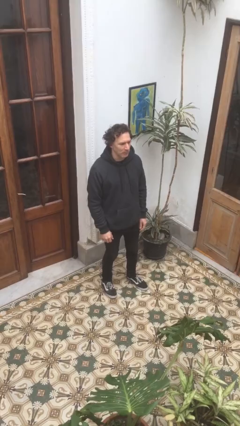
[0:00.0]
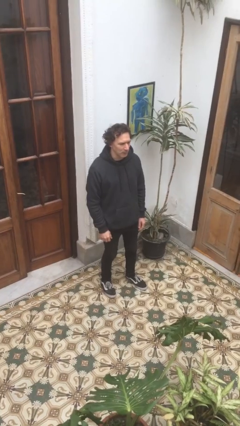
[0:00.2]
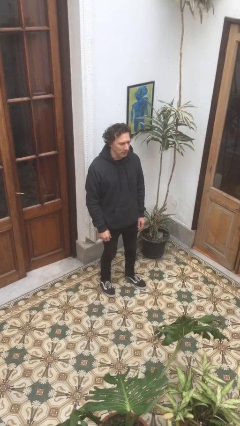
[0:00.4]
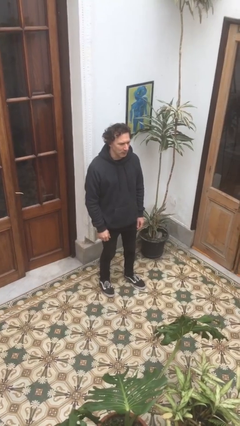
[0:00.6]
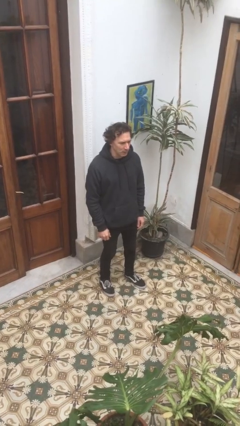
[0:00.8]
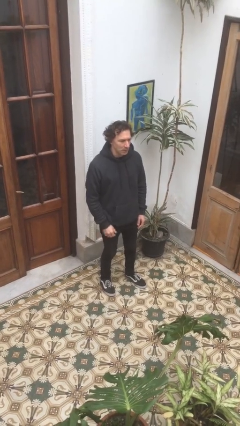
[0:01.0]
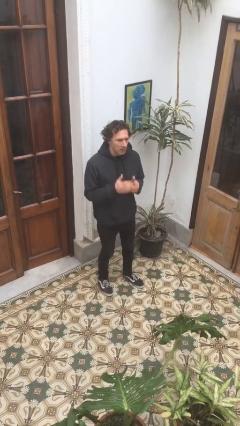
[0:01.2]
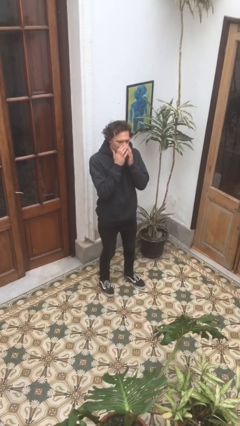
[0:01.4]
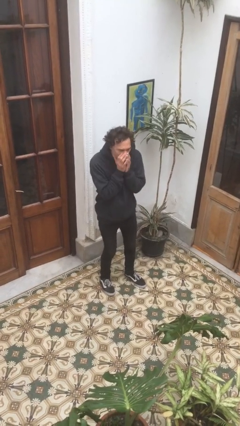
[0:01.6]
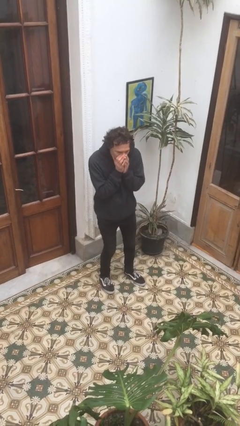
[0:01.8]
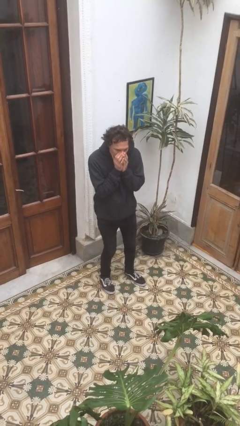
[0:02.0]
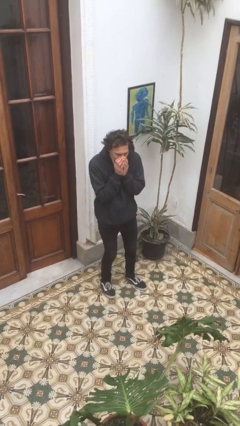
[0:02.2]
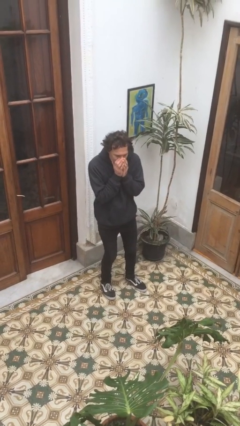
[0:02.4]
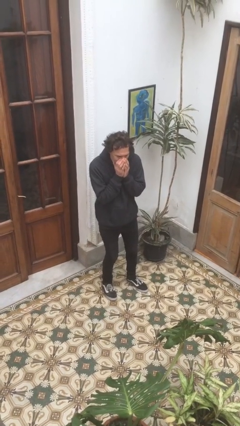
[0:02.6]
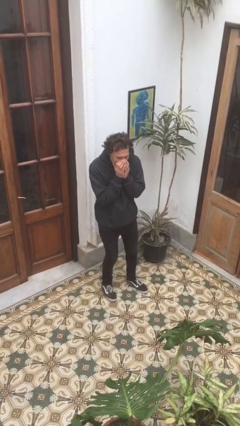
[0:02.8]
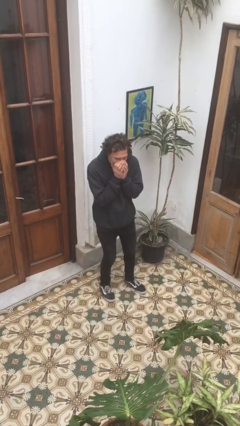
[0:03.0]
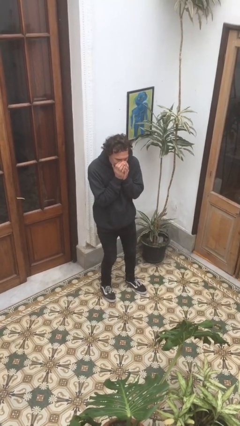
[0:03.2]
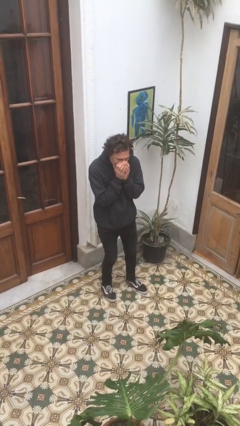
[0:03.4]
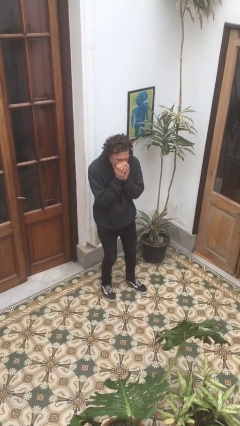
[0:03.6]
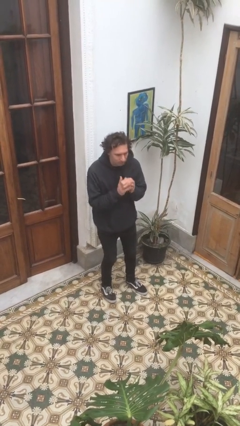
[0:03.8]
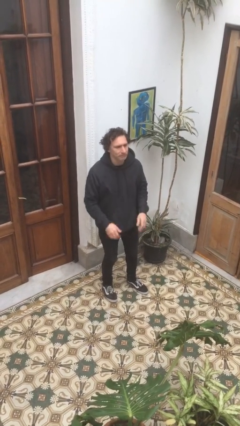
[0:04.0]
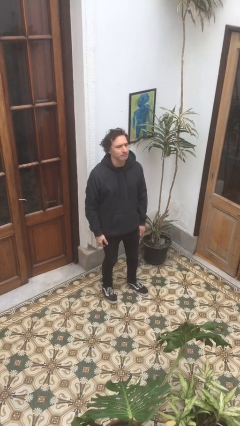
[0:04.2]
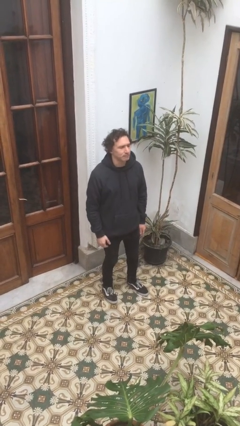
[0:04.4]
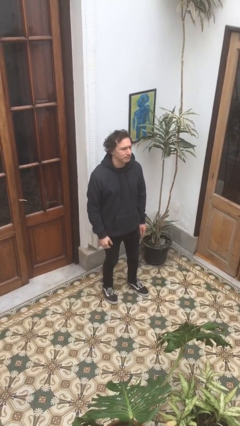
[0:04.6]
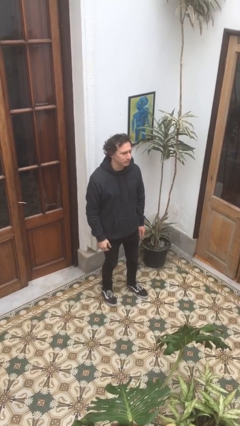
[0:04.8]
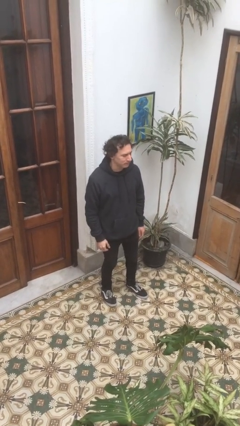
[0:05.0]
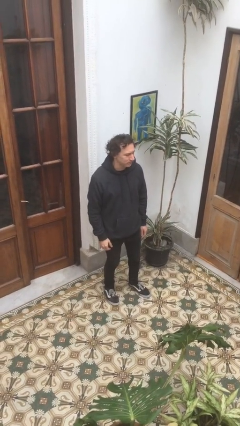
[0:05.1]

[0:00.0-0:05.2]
person sneezes into hand

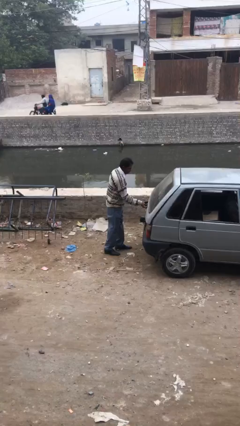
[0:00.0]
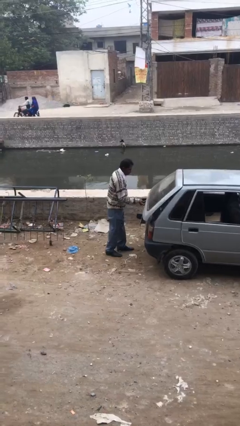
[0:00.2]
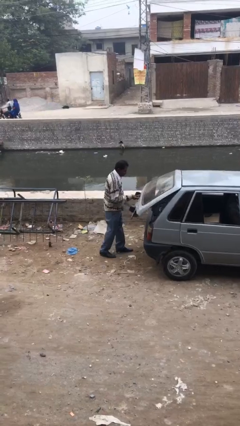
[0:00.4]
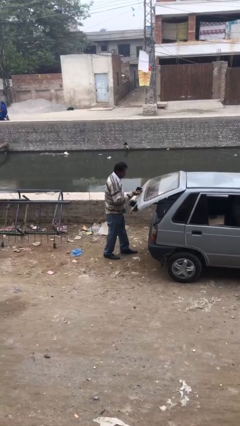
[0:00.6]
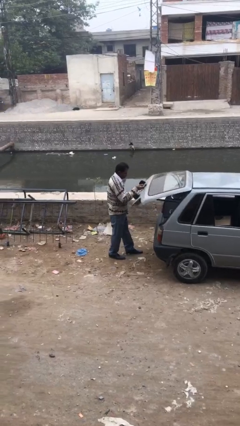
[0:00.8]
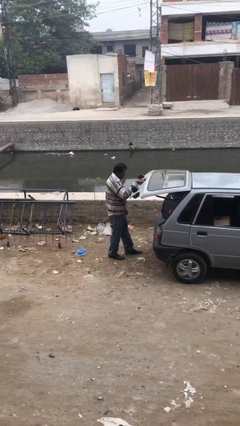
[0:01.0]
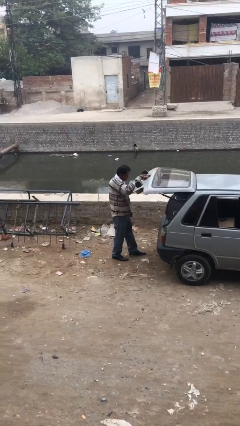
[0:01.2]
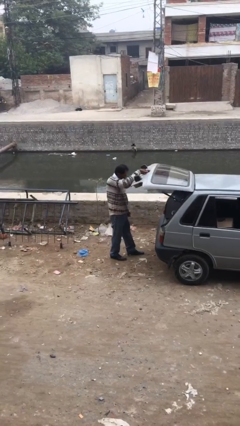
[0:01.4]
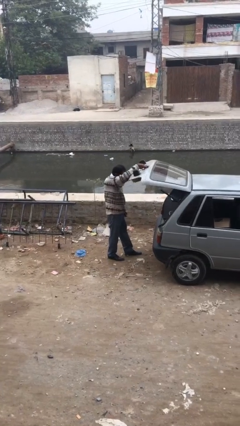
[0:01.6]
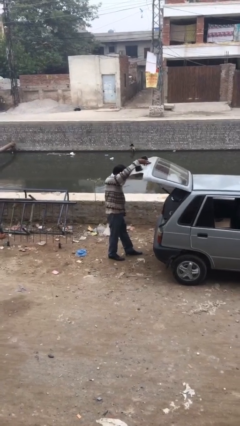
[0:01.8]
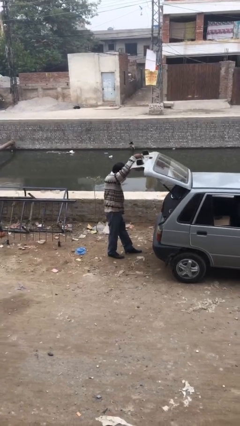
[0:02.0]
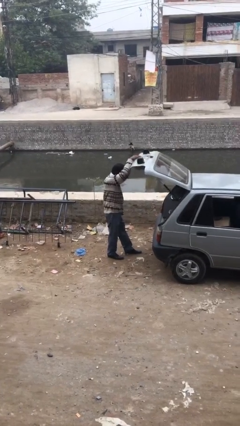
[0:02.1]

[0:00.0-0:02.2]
person opens car trunk

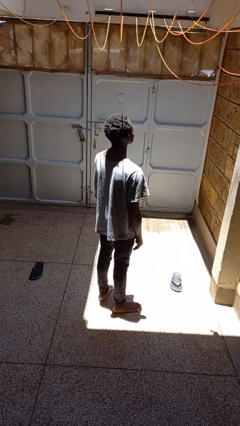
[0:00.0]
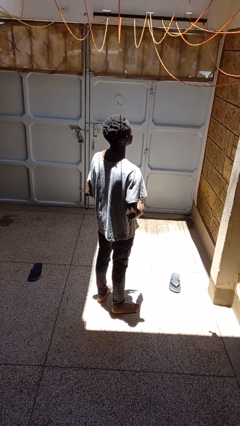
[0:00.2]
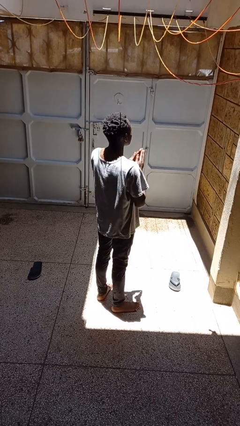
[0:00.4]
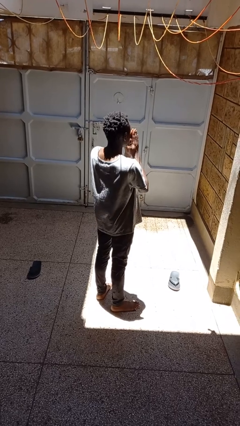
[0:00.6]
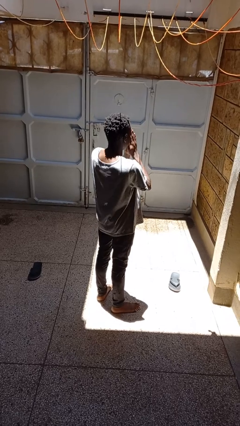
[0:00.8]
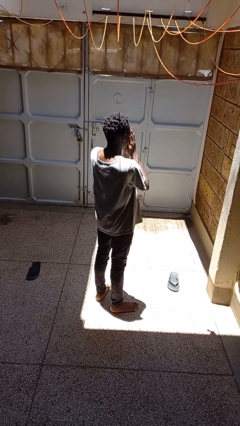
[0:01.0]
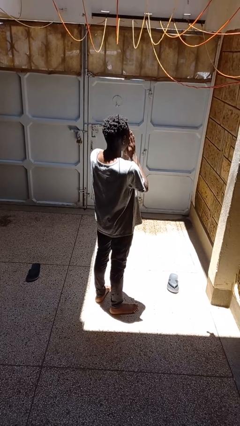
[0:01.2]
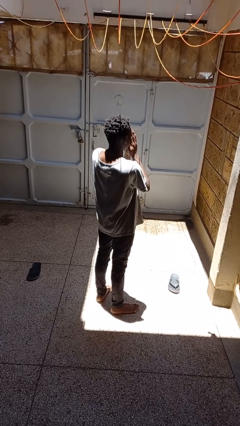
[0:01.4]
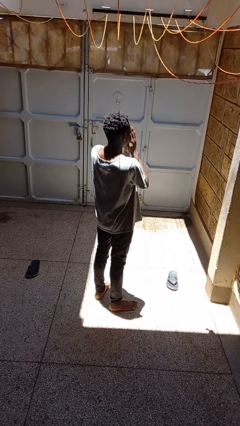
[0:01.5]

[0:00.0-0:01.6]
person prays

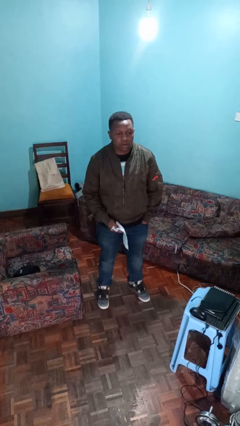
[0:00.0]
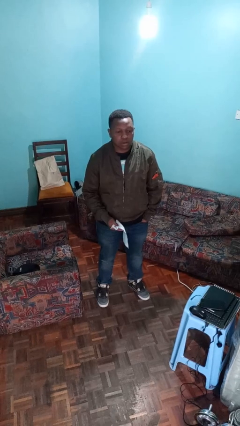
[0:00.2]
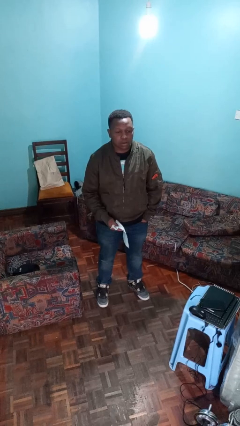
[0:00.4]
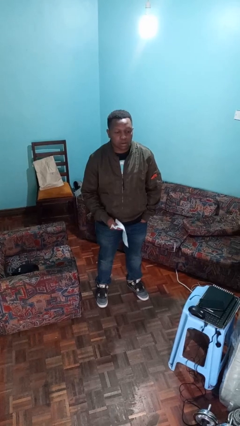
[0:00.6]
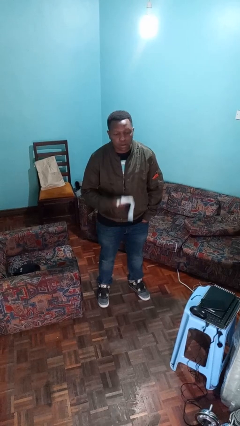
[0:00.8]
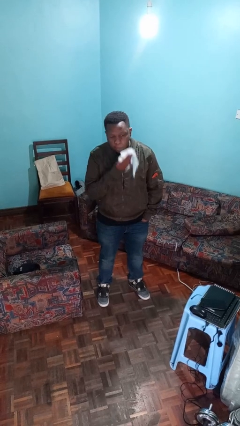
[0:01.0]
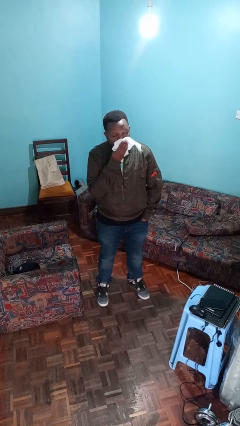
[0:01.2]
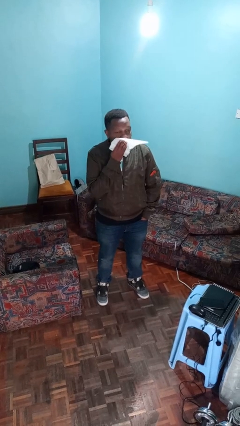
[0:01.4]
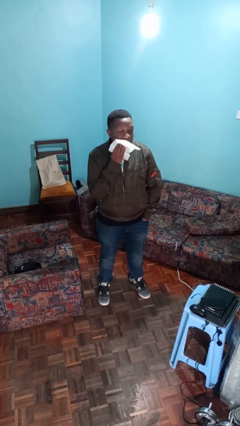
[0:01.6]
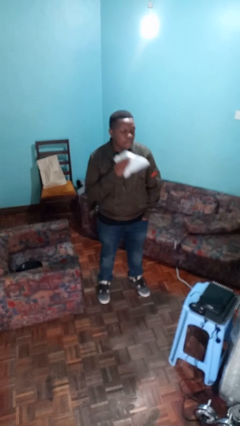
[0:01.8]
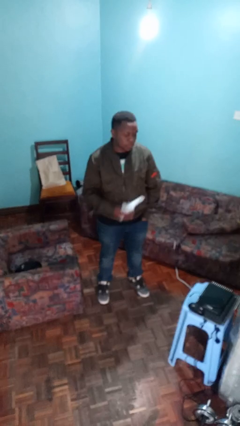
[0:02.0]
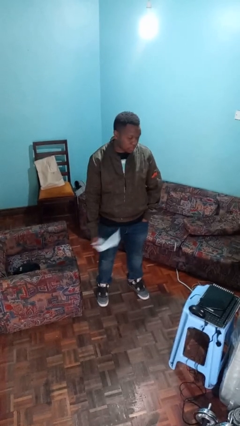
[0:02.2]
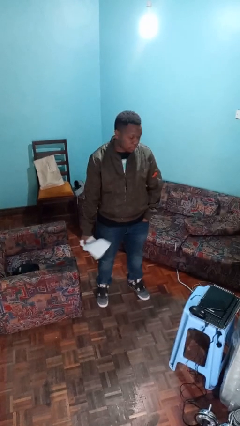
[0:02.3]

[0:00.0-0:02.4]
person wipes mouth with napkin

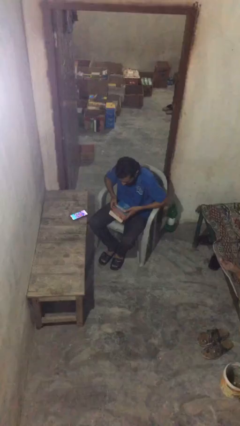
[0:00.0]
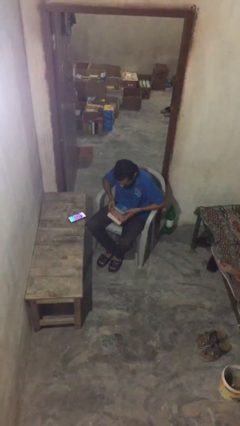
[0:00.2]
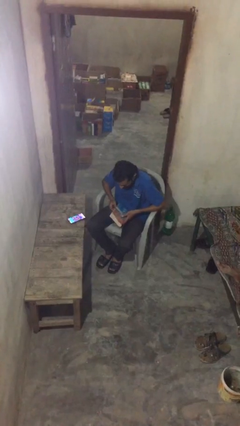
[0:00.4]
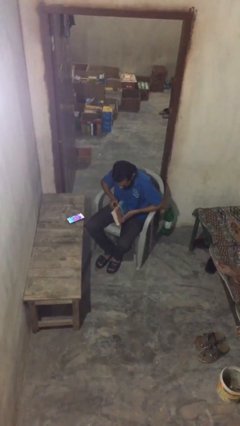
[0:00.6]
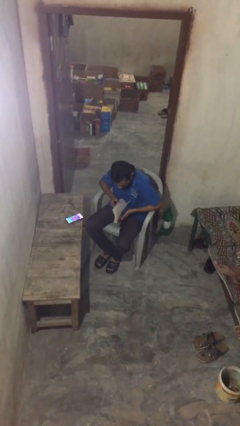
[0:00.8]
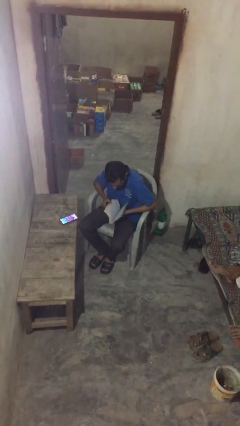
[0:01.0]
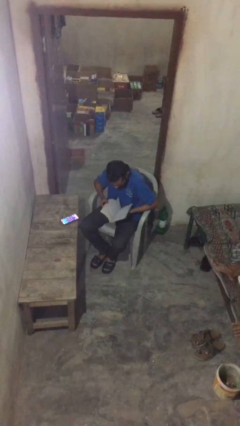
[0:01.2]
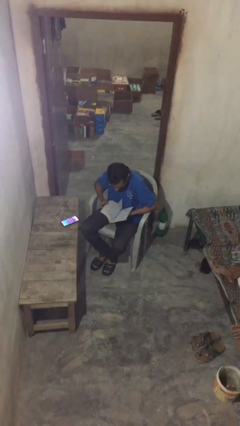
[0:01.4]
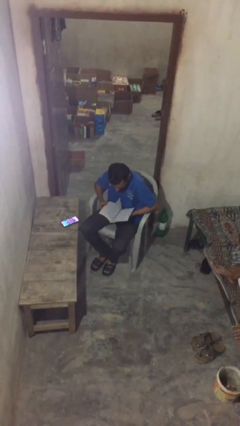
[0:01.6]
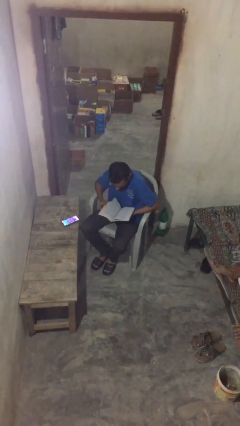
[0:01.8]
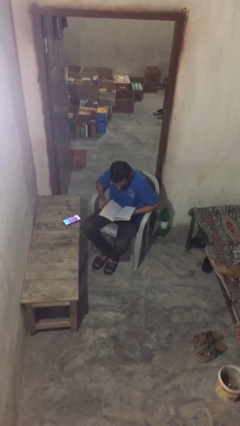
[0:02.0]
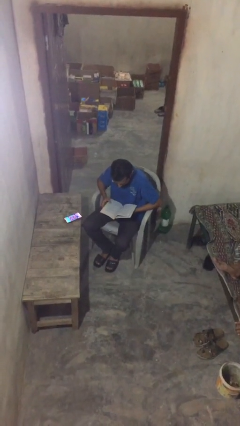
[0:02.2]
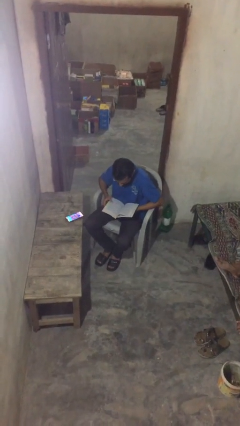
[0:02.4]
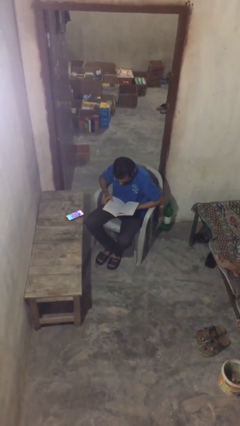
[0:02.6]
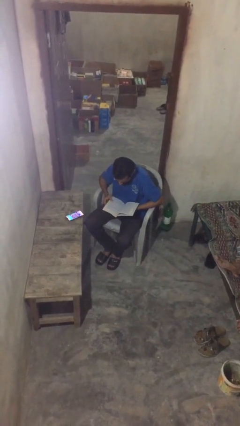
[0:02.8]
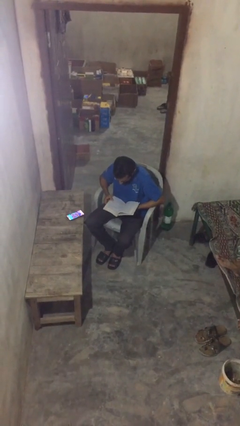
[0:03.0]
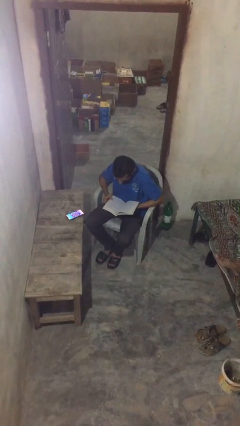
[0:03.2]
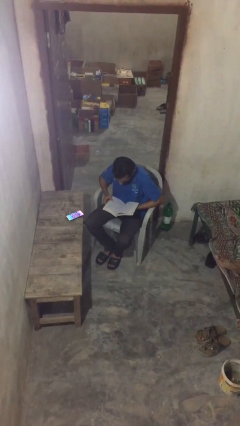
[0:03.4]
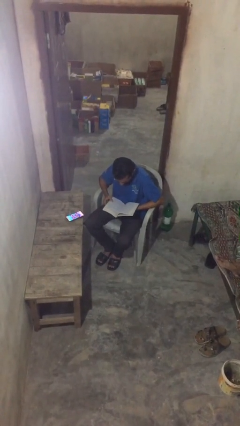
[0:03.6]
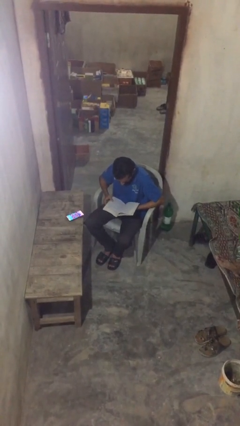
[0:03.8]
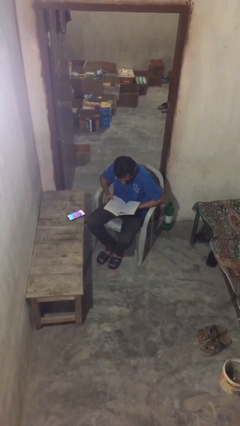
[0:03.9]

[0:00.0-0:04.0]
person reads document

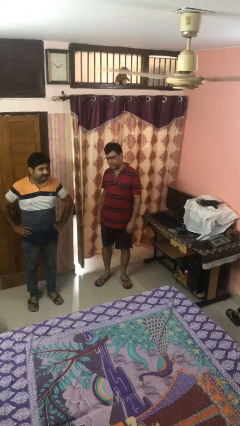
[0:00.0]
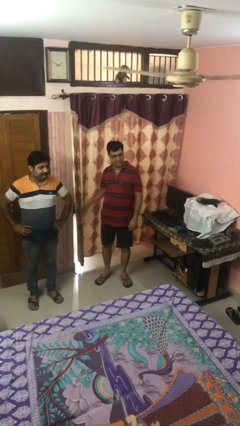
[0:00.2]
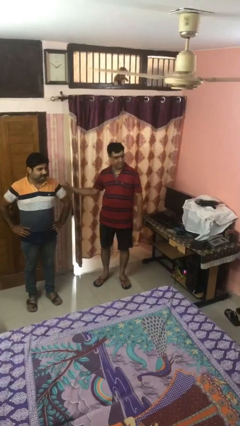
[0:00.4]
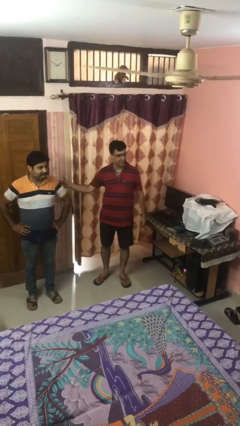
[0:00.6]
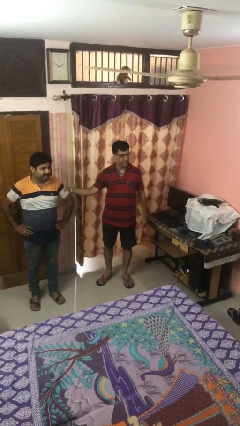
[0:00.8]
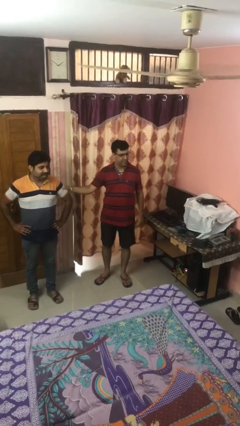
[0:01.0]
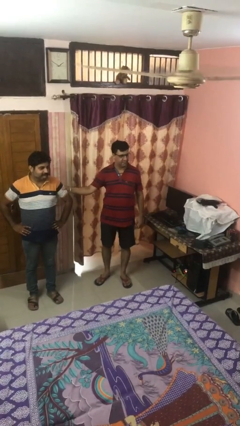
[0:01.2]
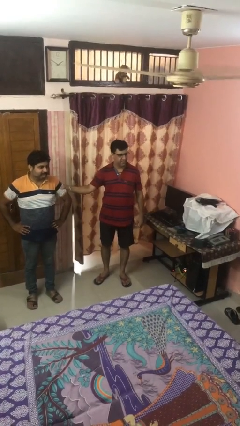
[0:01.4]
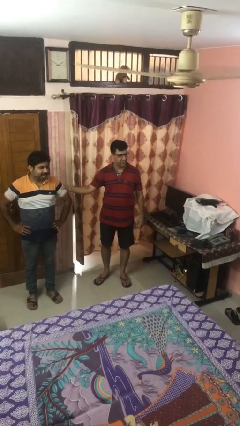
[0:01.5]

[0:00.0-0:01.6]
person grabs person by bicep

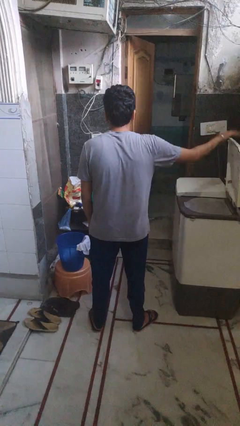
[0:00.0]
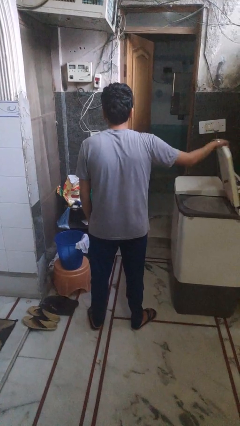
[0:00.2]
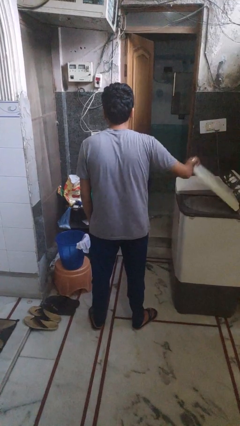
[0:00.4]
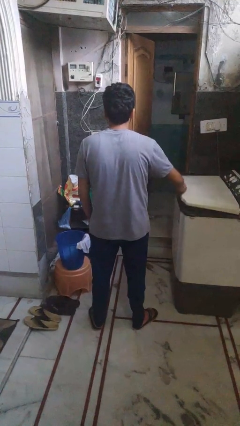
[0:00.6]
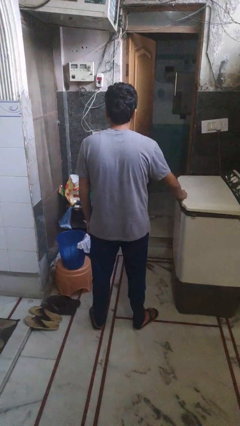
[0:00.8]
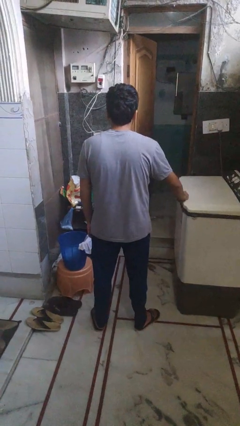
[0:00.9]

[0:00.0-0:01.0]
person closes clothes washer
